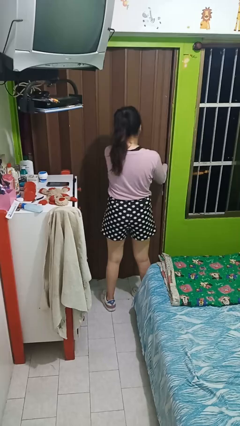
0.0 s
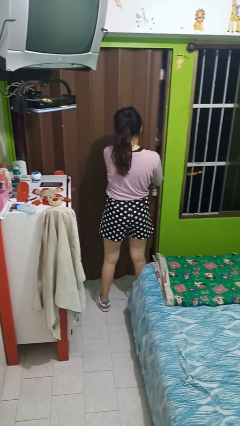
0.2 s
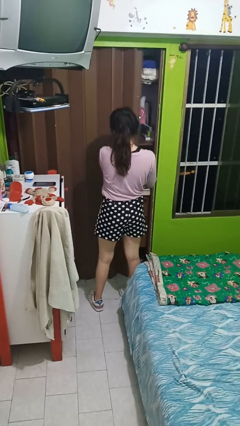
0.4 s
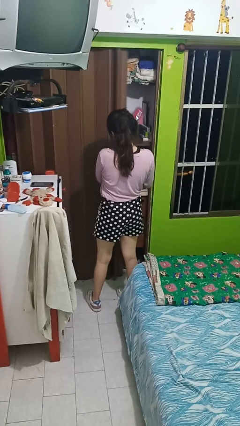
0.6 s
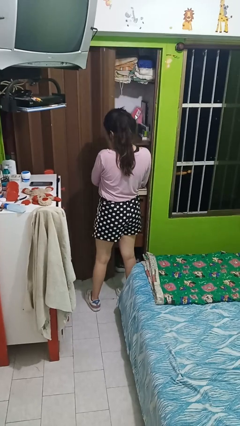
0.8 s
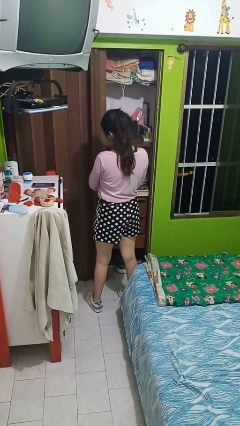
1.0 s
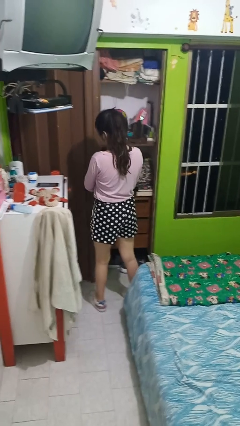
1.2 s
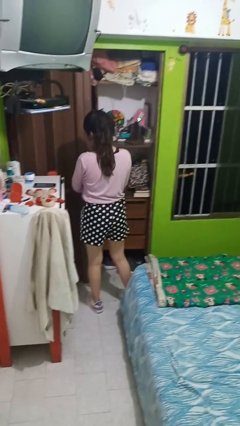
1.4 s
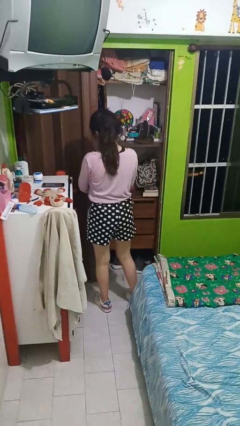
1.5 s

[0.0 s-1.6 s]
person opens sliding door

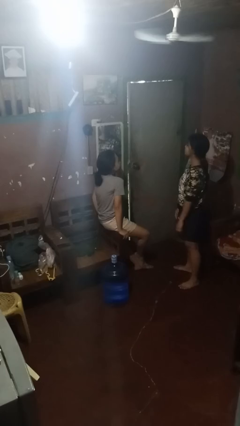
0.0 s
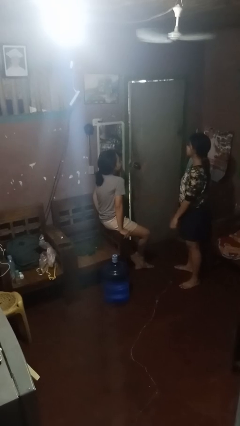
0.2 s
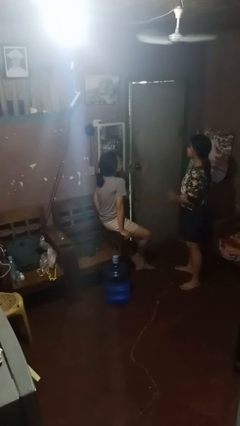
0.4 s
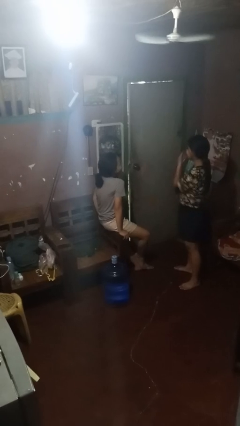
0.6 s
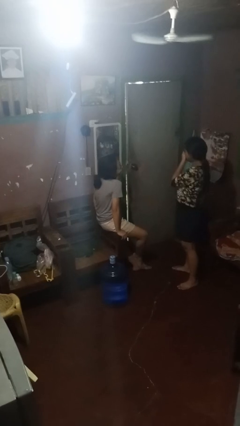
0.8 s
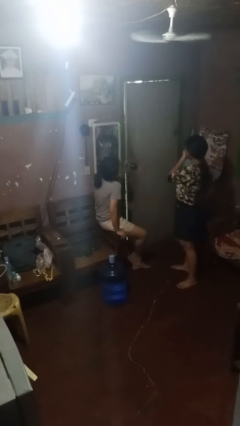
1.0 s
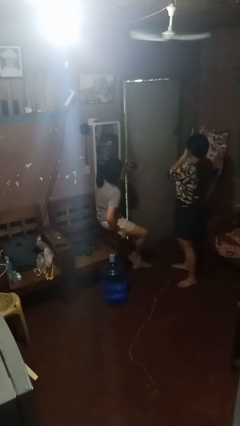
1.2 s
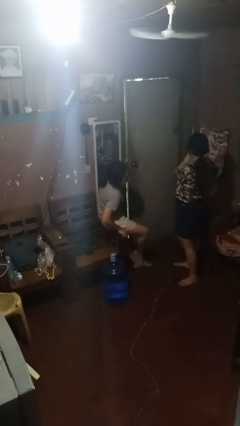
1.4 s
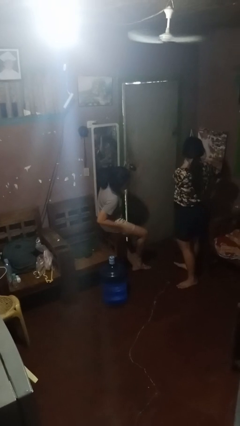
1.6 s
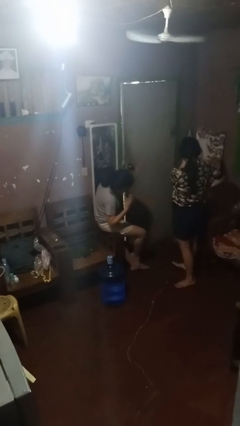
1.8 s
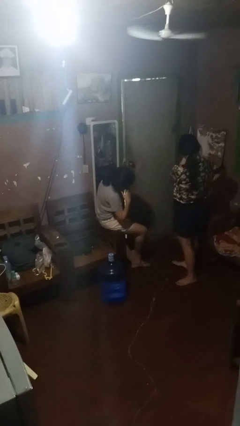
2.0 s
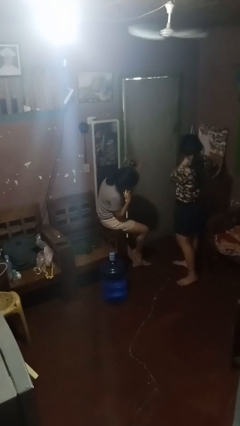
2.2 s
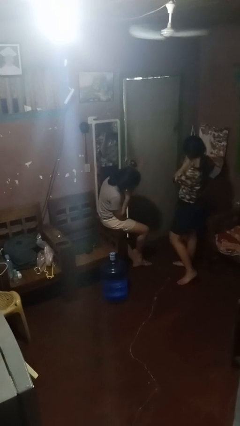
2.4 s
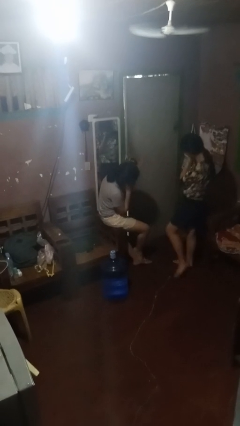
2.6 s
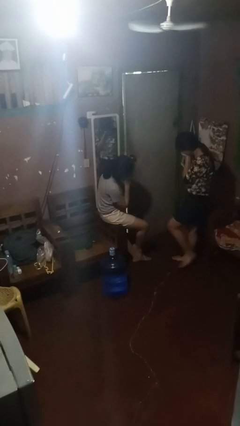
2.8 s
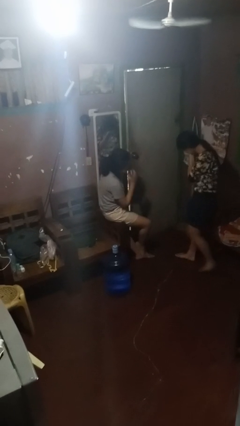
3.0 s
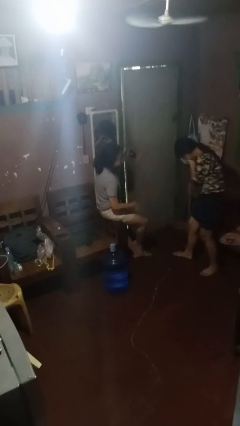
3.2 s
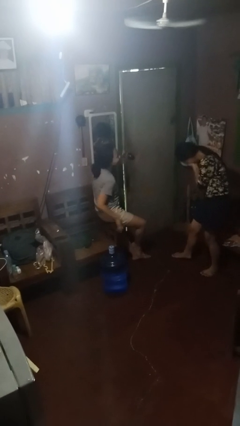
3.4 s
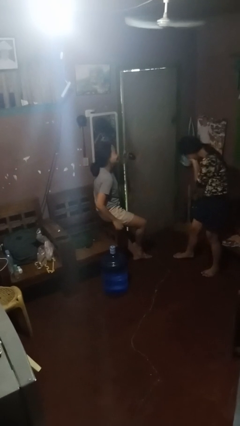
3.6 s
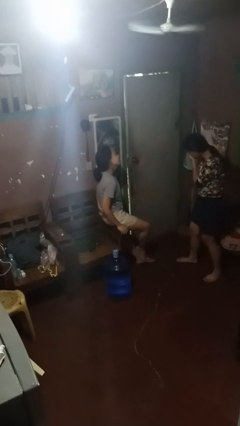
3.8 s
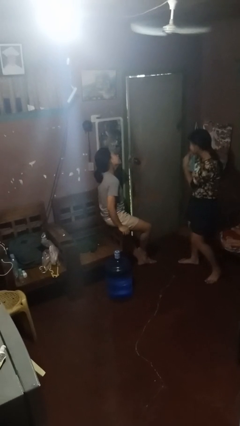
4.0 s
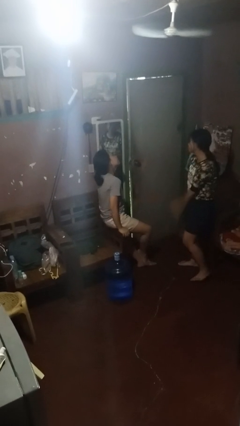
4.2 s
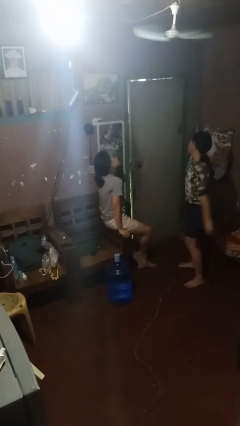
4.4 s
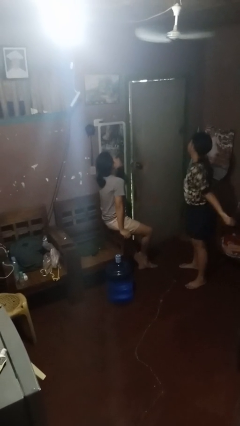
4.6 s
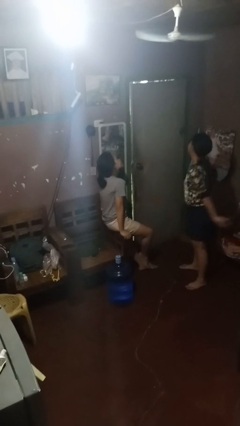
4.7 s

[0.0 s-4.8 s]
person laughs with person

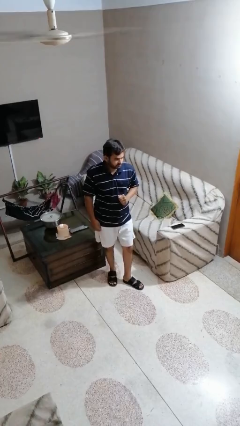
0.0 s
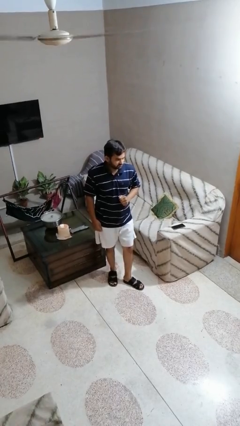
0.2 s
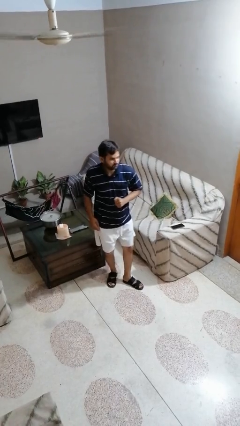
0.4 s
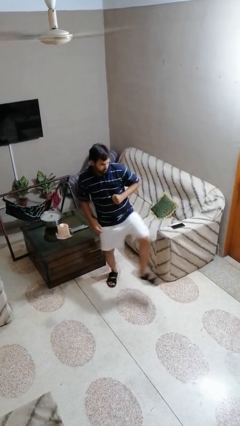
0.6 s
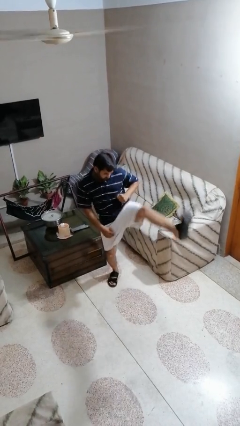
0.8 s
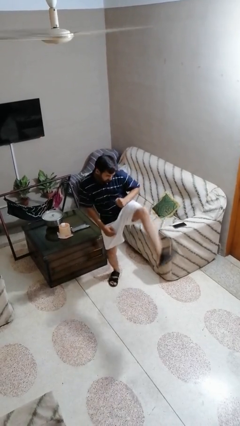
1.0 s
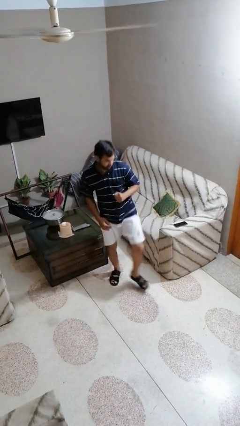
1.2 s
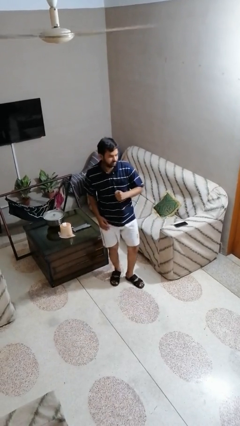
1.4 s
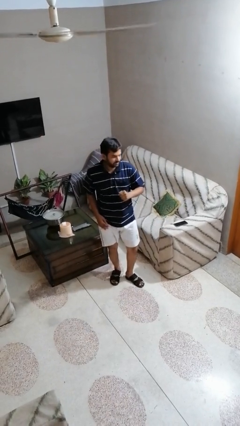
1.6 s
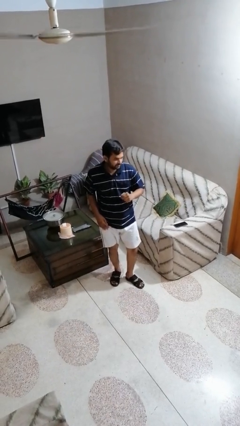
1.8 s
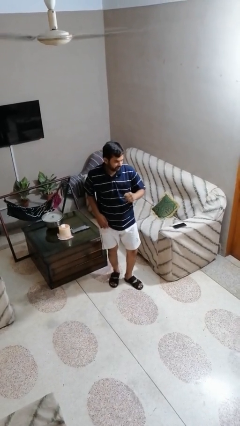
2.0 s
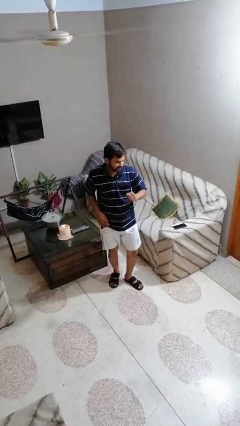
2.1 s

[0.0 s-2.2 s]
person karate kicks

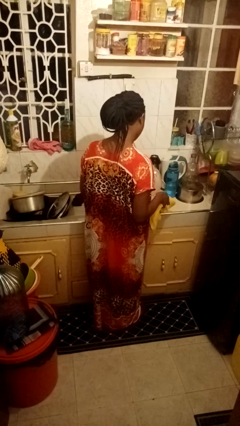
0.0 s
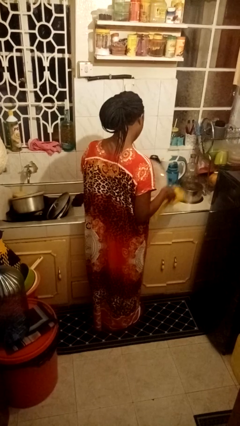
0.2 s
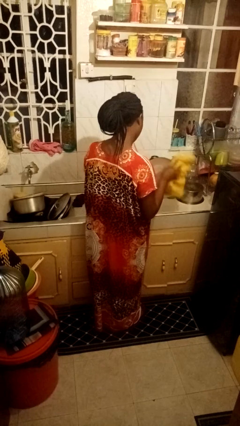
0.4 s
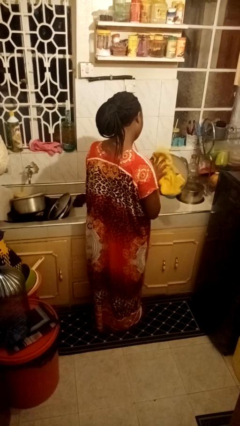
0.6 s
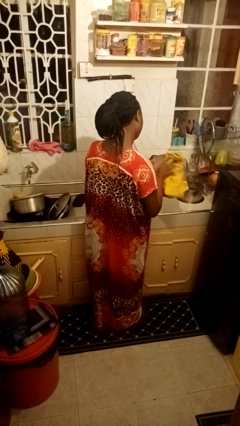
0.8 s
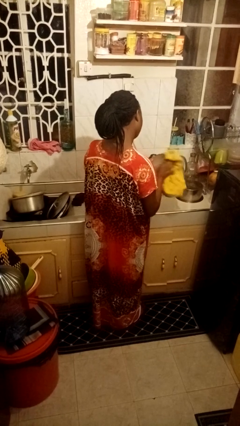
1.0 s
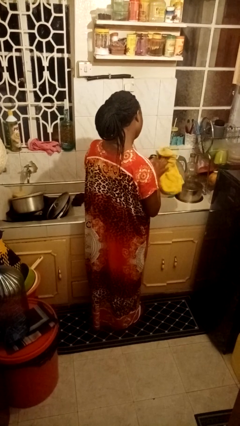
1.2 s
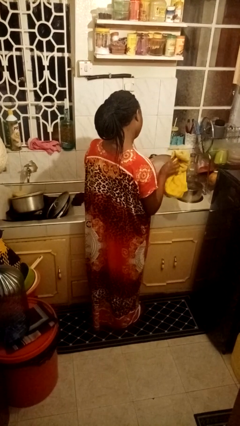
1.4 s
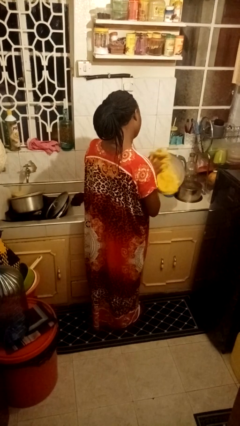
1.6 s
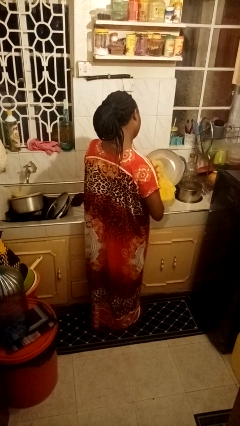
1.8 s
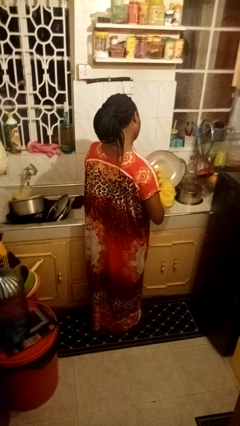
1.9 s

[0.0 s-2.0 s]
person dries dish

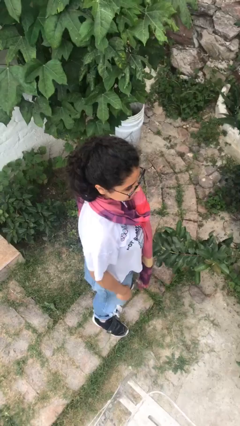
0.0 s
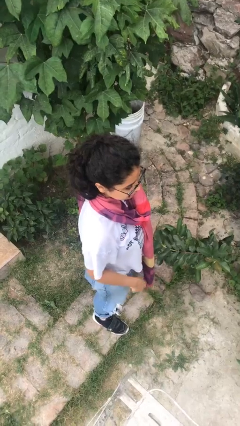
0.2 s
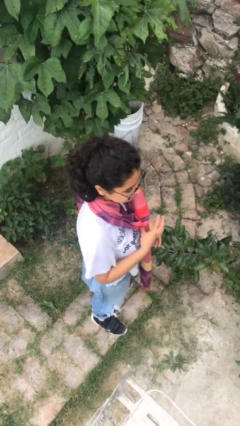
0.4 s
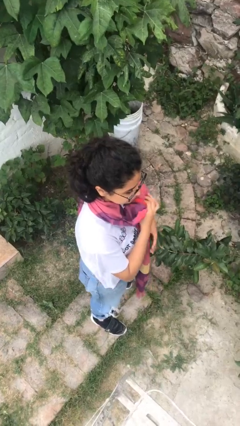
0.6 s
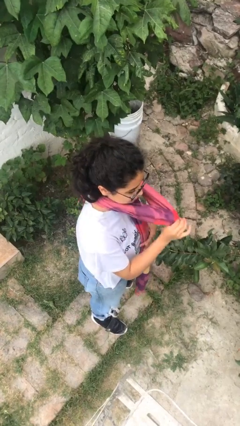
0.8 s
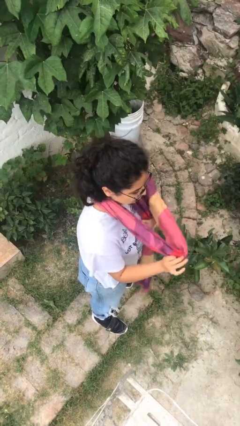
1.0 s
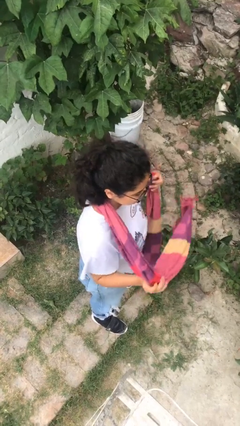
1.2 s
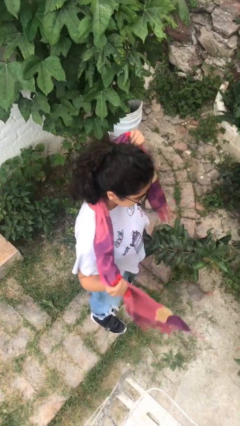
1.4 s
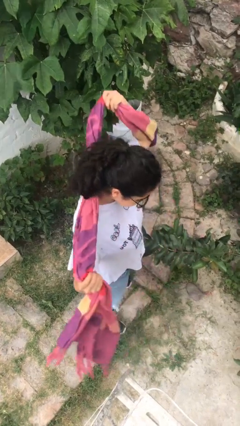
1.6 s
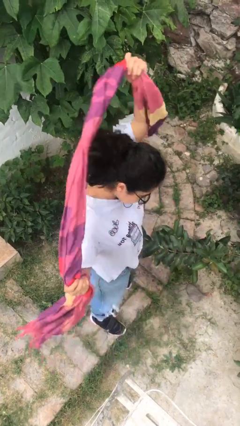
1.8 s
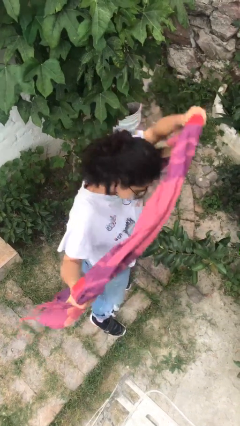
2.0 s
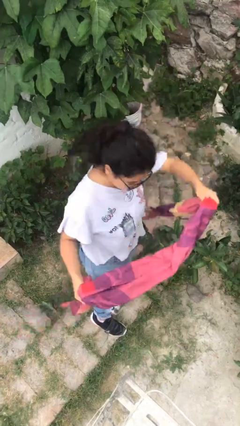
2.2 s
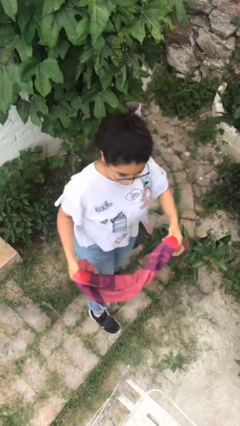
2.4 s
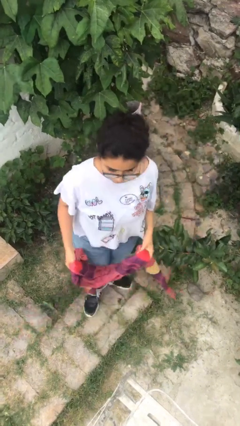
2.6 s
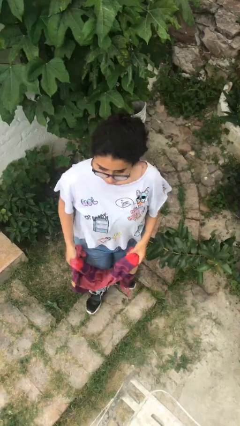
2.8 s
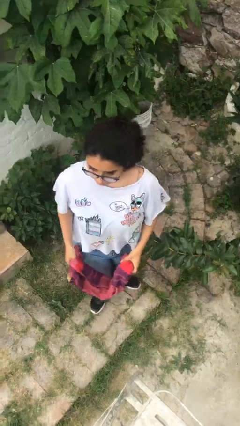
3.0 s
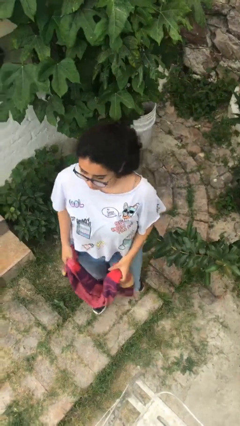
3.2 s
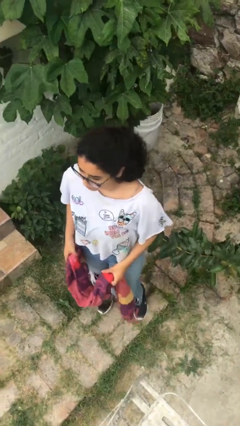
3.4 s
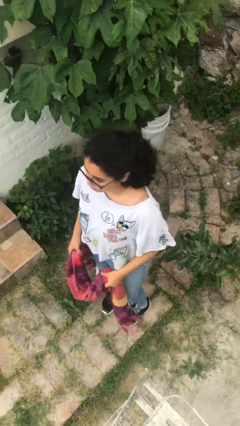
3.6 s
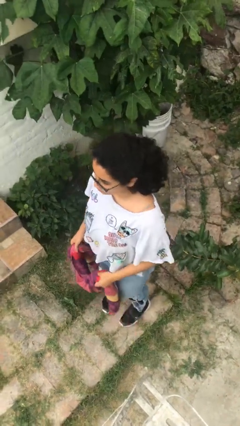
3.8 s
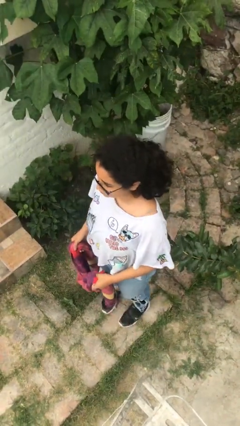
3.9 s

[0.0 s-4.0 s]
person takes off scarf

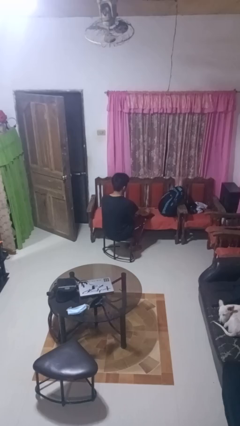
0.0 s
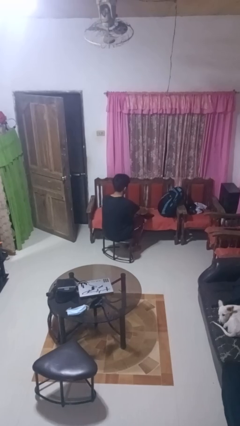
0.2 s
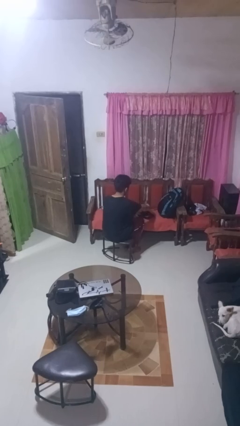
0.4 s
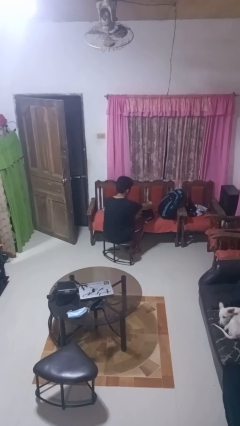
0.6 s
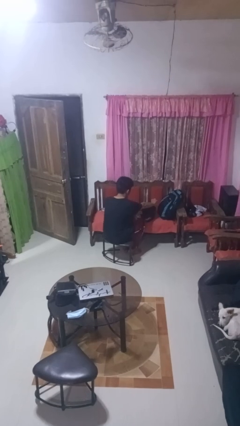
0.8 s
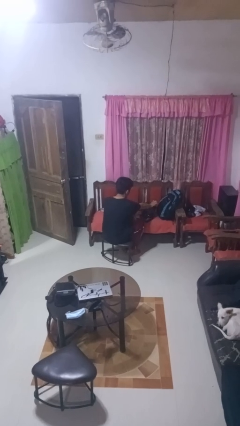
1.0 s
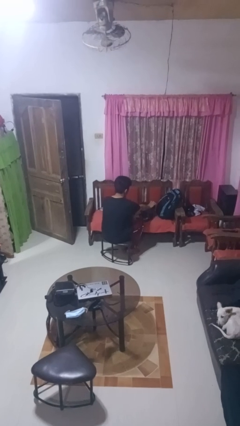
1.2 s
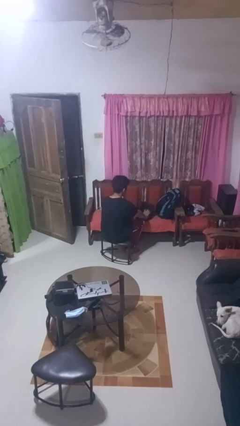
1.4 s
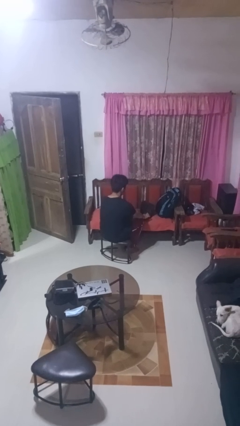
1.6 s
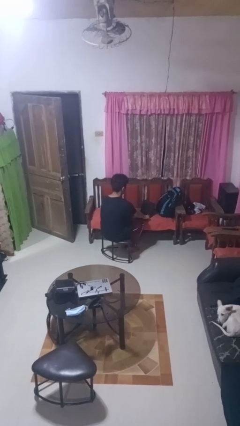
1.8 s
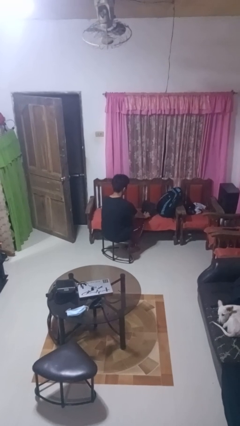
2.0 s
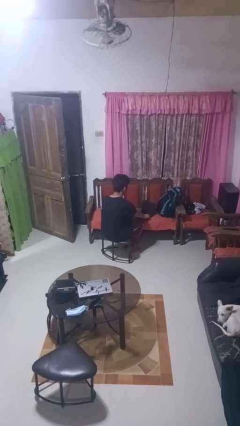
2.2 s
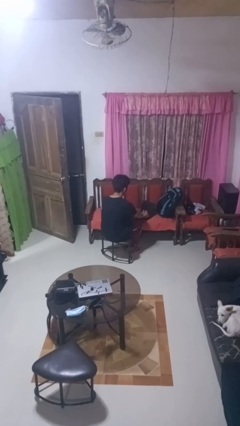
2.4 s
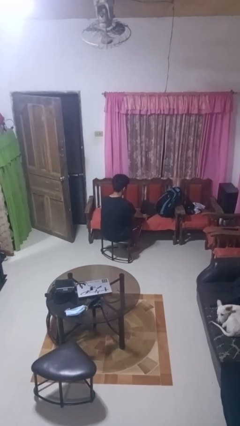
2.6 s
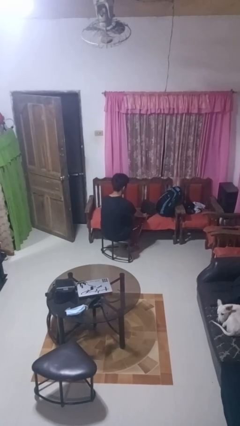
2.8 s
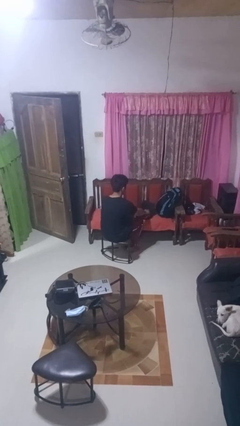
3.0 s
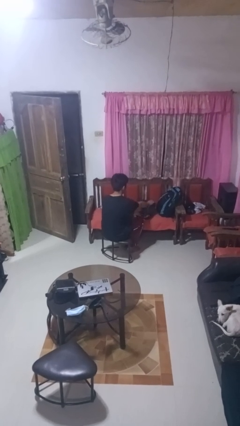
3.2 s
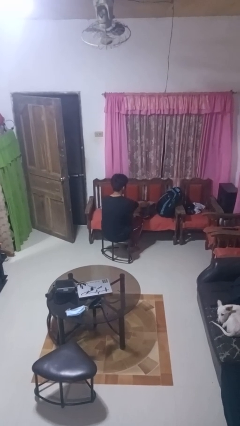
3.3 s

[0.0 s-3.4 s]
person opens laptop
